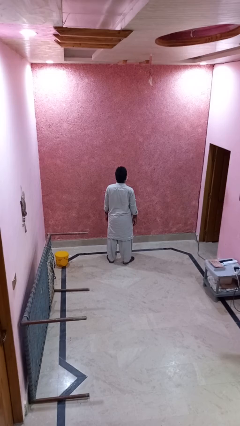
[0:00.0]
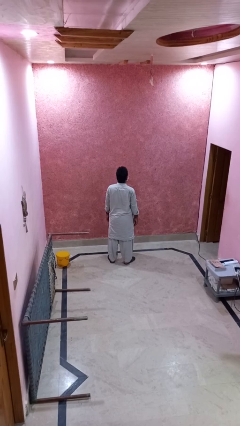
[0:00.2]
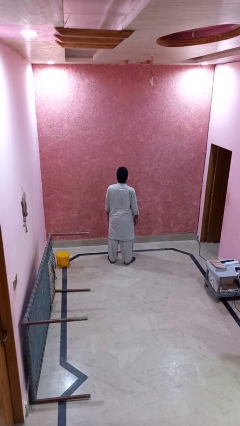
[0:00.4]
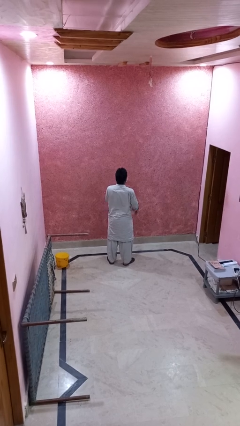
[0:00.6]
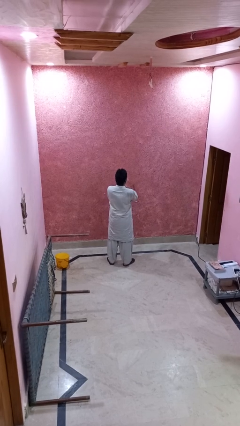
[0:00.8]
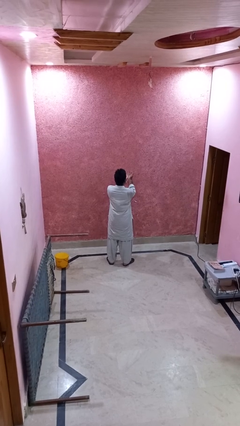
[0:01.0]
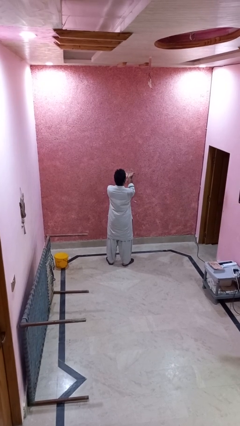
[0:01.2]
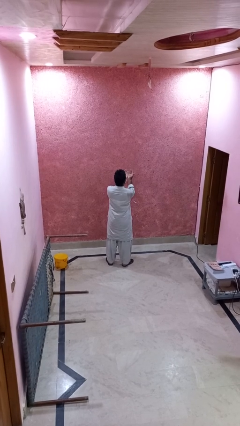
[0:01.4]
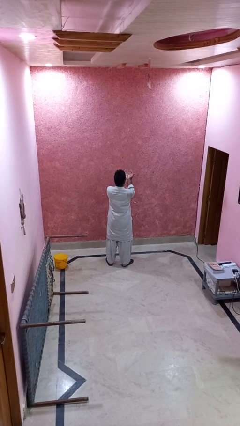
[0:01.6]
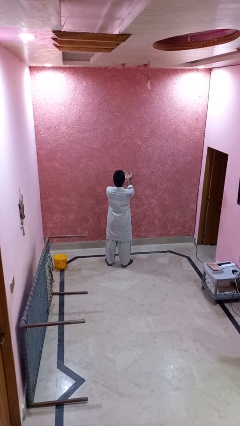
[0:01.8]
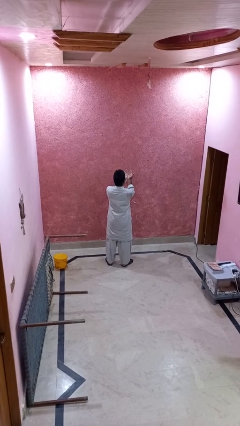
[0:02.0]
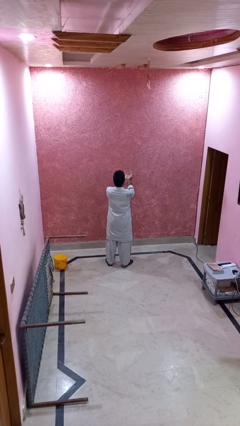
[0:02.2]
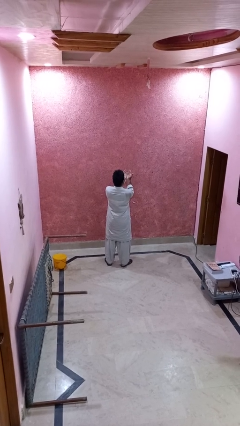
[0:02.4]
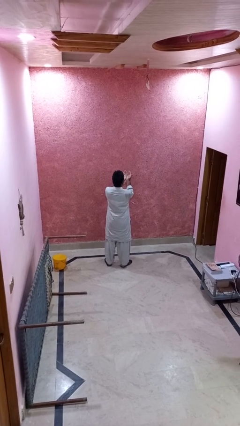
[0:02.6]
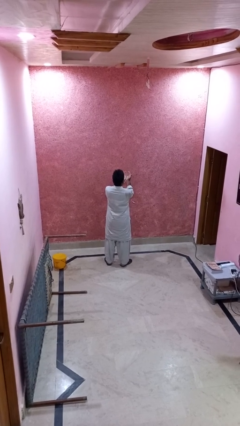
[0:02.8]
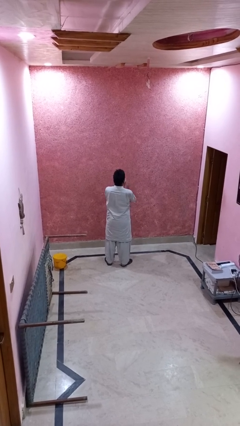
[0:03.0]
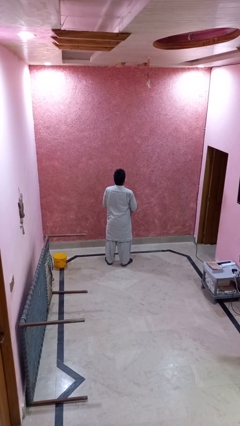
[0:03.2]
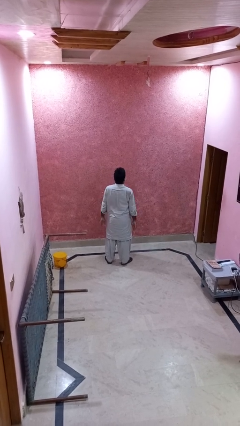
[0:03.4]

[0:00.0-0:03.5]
person prays

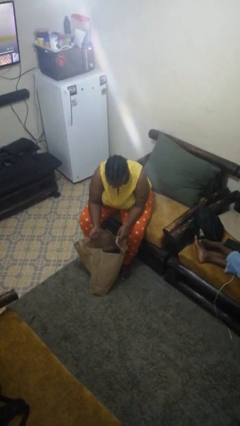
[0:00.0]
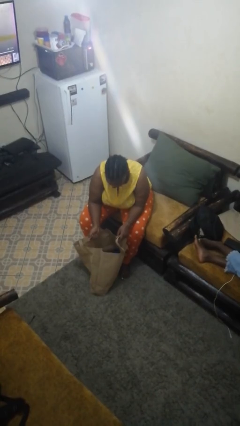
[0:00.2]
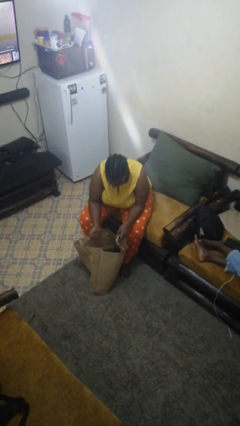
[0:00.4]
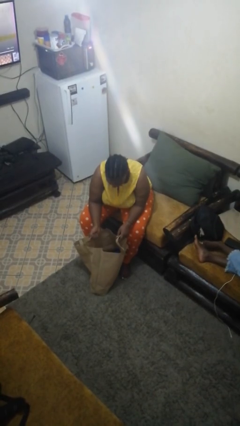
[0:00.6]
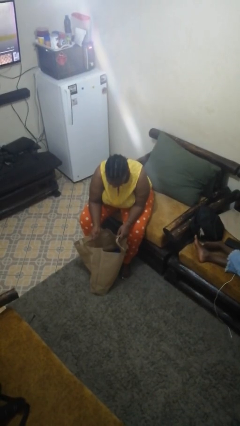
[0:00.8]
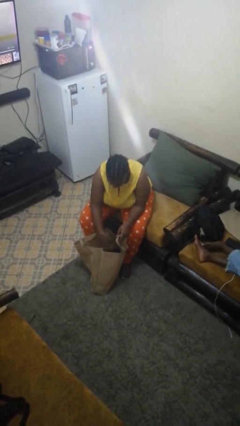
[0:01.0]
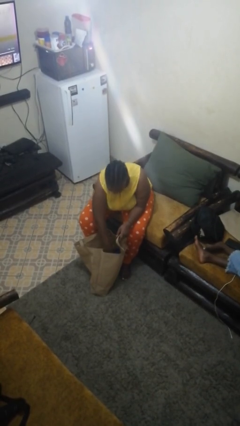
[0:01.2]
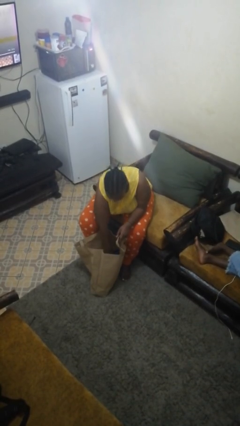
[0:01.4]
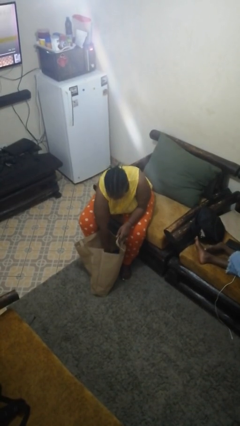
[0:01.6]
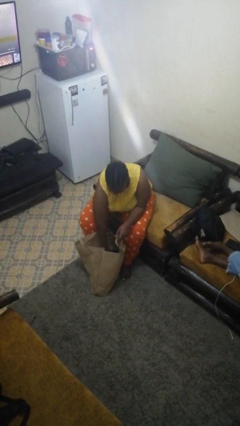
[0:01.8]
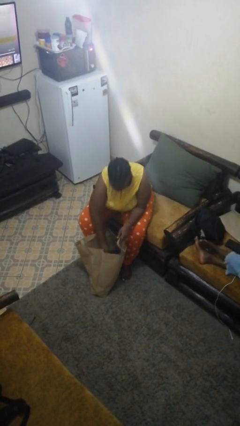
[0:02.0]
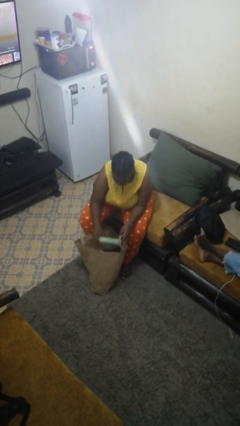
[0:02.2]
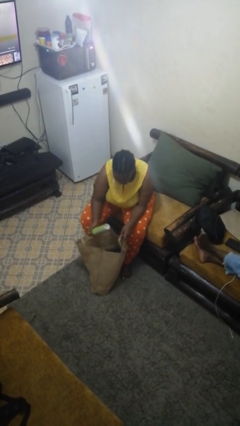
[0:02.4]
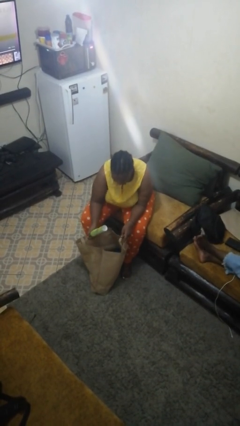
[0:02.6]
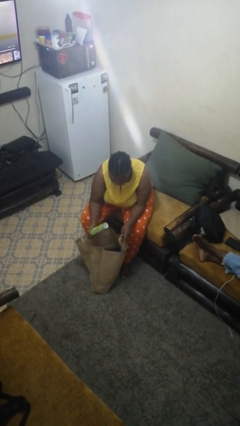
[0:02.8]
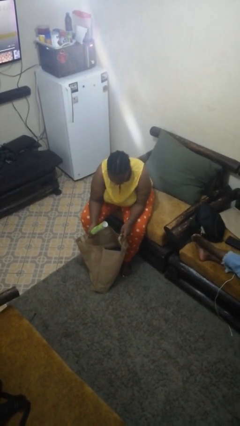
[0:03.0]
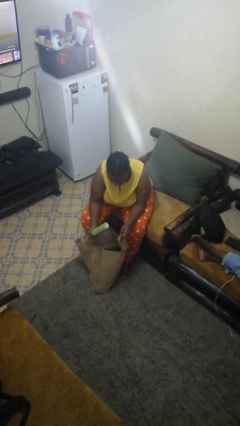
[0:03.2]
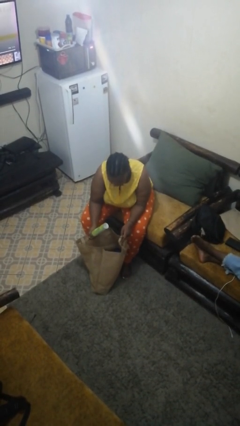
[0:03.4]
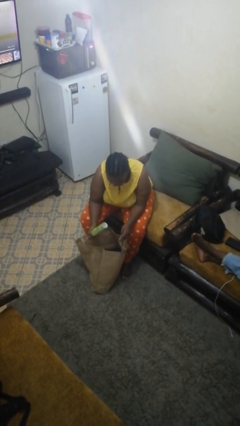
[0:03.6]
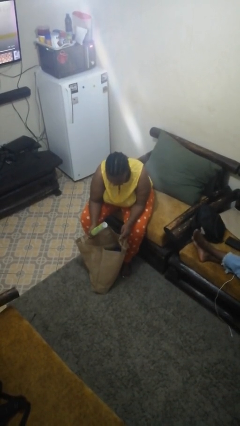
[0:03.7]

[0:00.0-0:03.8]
person takes object from bag

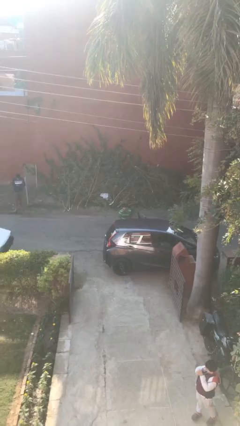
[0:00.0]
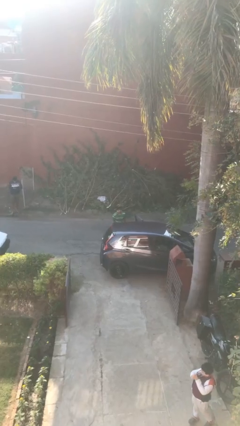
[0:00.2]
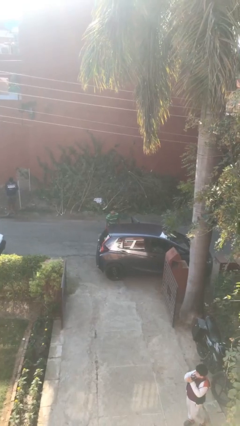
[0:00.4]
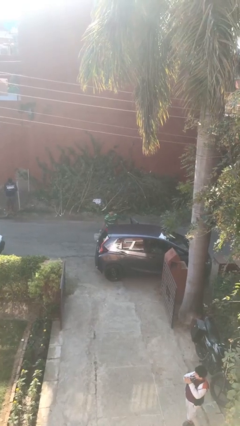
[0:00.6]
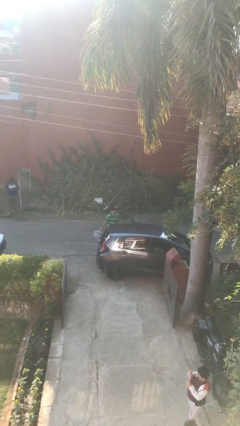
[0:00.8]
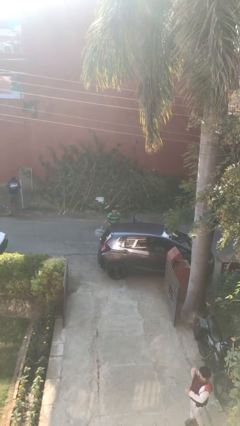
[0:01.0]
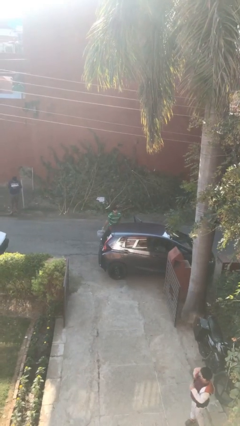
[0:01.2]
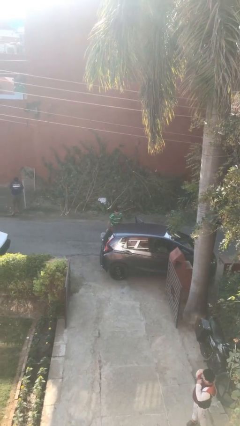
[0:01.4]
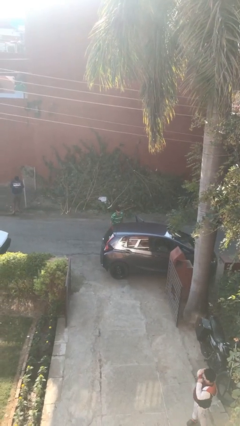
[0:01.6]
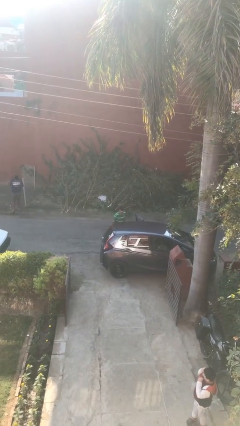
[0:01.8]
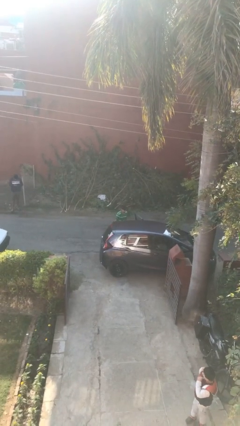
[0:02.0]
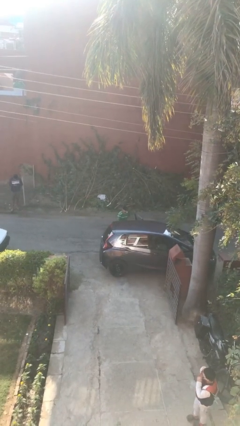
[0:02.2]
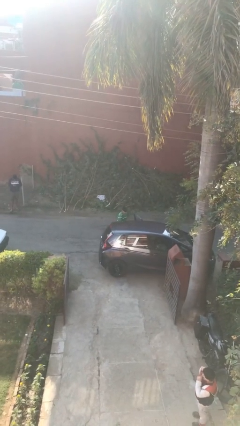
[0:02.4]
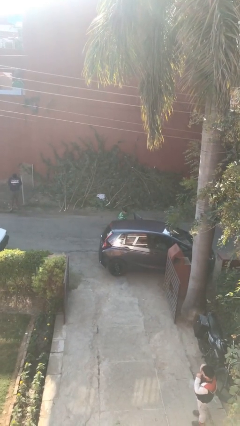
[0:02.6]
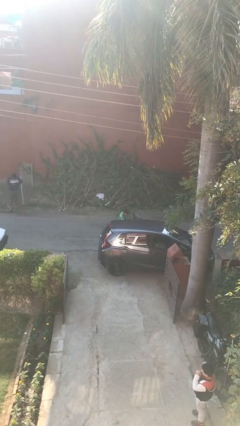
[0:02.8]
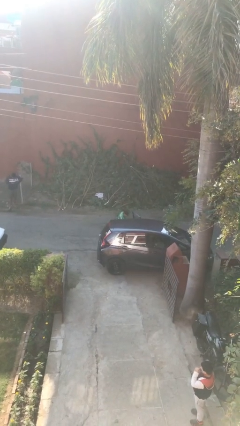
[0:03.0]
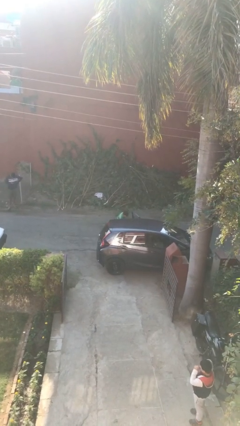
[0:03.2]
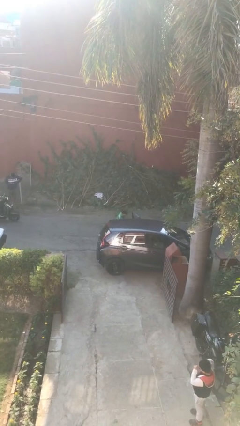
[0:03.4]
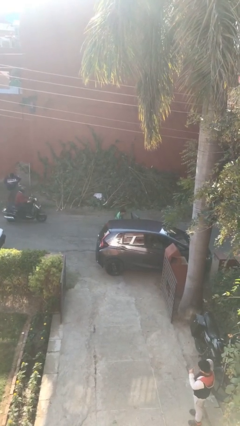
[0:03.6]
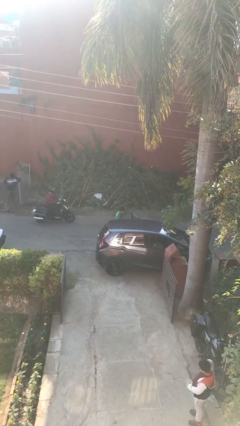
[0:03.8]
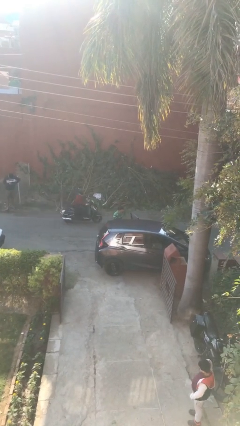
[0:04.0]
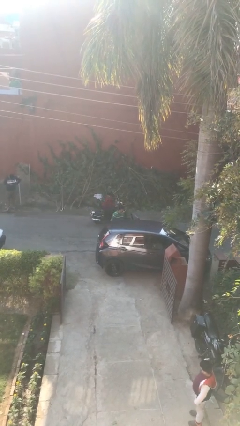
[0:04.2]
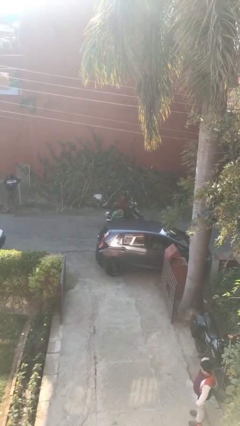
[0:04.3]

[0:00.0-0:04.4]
person loads car

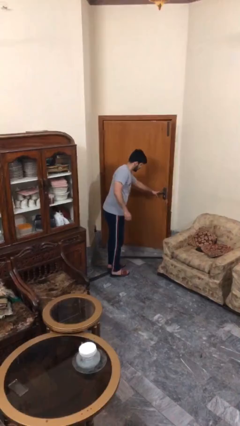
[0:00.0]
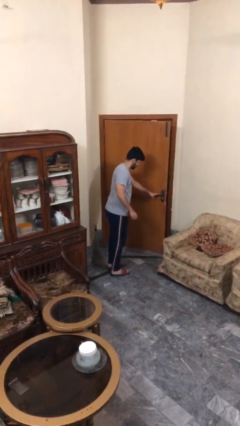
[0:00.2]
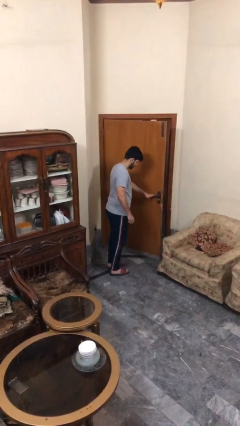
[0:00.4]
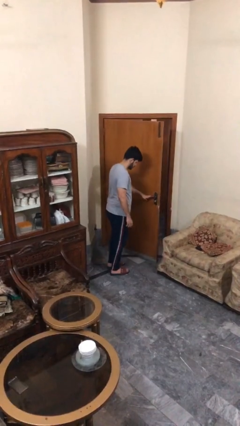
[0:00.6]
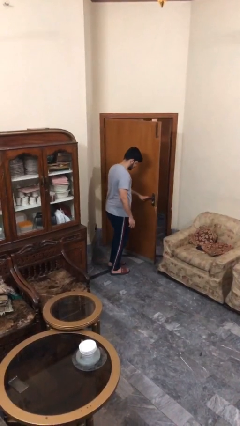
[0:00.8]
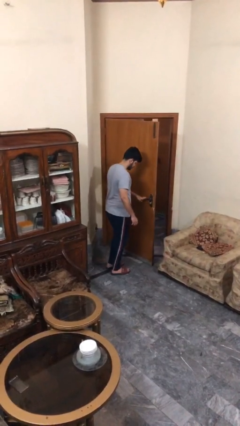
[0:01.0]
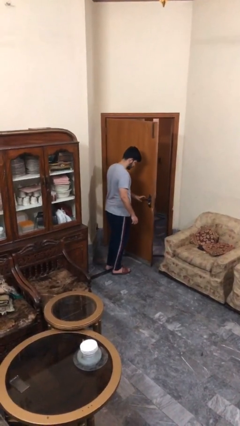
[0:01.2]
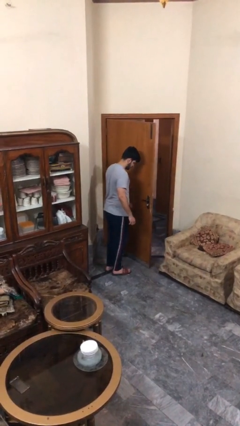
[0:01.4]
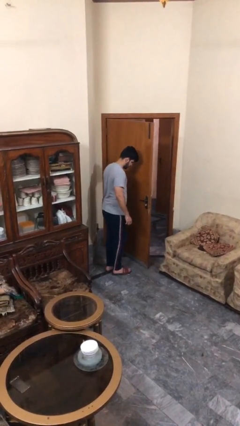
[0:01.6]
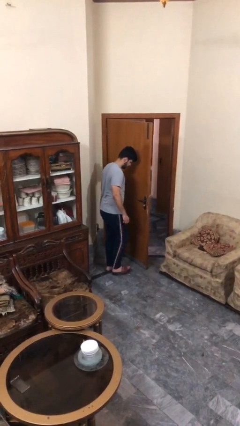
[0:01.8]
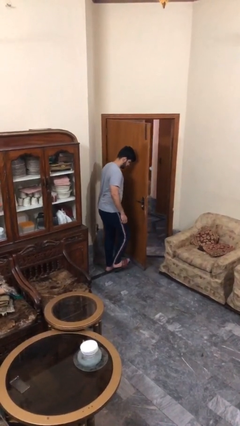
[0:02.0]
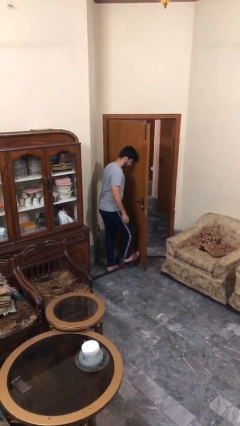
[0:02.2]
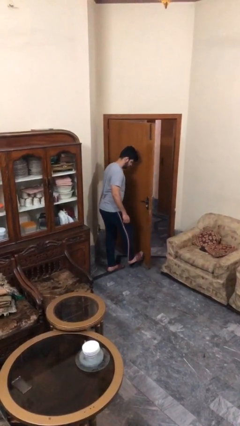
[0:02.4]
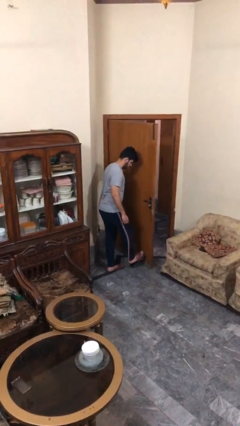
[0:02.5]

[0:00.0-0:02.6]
person opens facility door

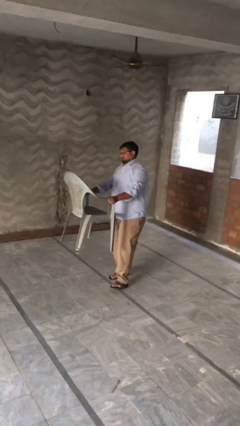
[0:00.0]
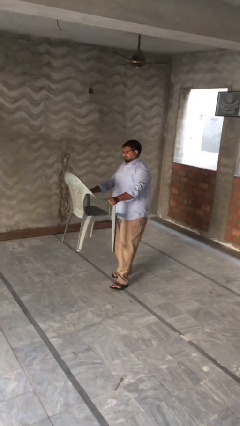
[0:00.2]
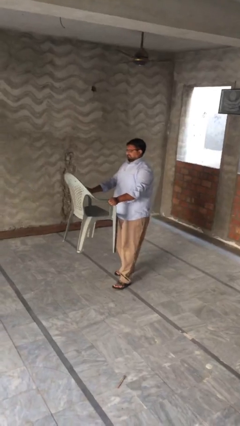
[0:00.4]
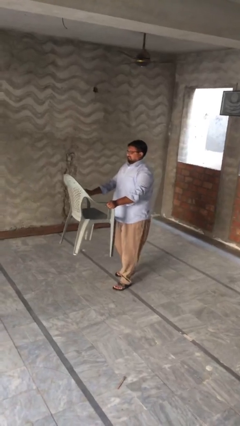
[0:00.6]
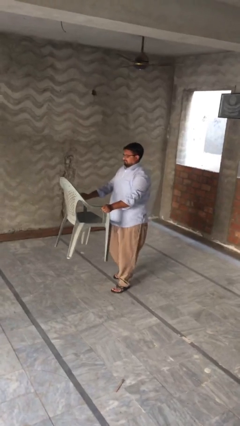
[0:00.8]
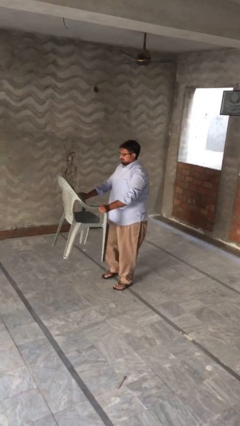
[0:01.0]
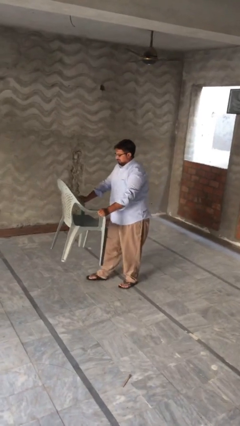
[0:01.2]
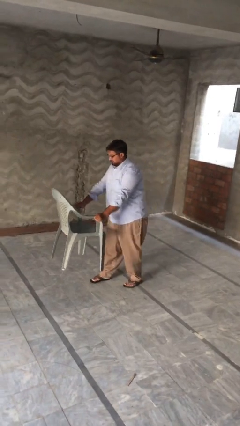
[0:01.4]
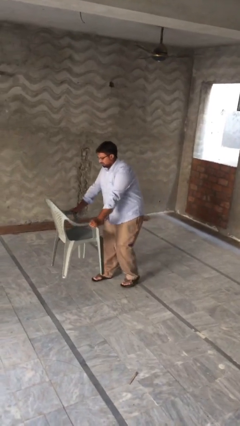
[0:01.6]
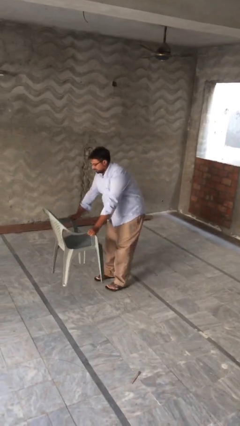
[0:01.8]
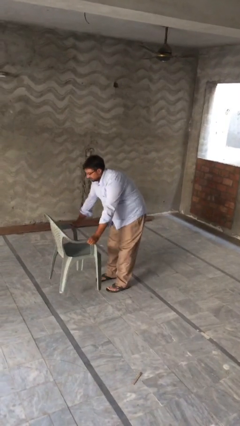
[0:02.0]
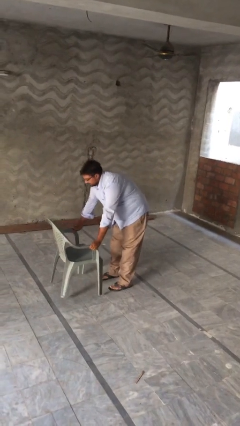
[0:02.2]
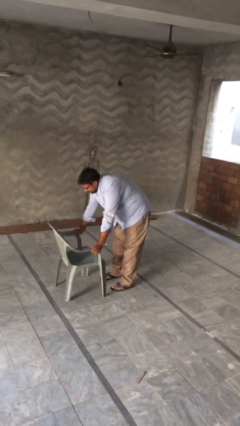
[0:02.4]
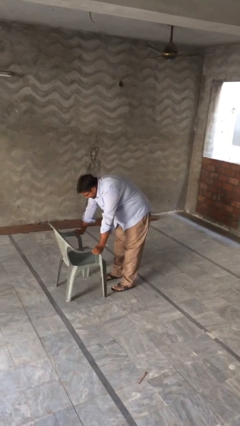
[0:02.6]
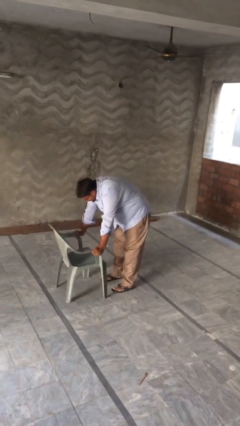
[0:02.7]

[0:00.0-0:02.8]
person puts down object on floor

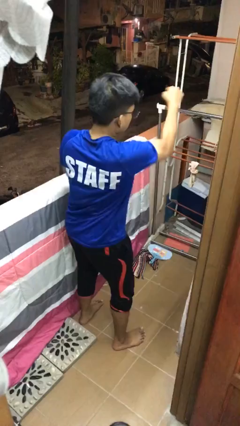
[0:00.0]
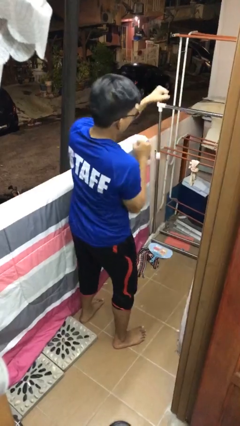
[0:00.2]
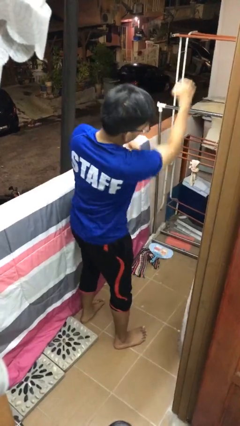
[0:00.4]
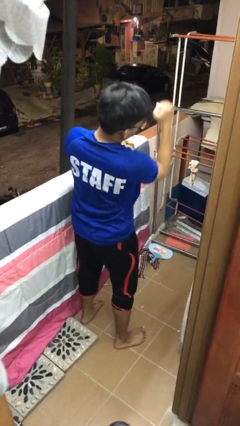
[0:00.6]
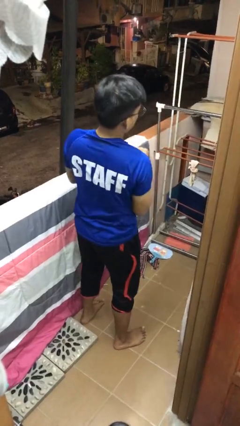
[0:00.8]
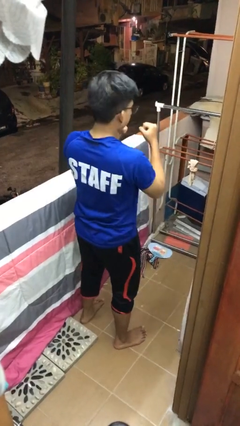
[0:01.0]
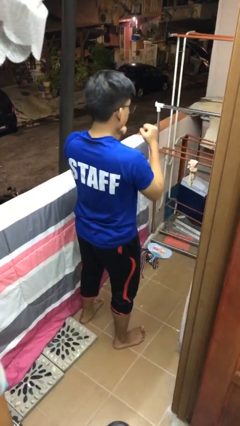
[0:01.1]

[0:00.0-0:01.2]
person punches
